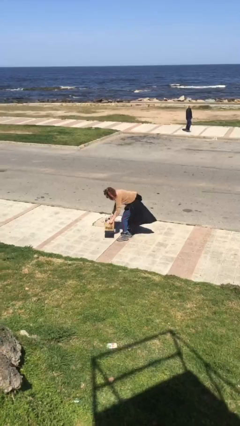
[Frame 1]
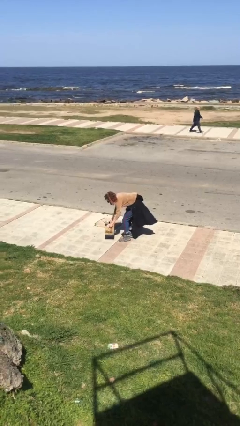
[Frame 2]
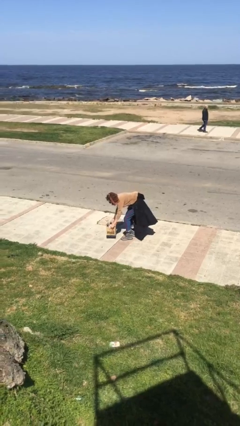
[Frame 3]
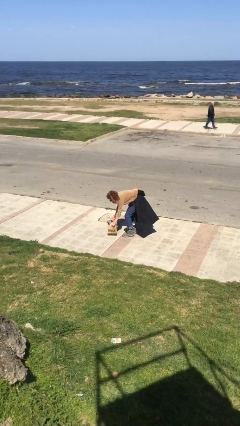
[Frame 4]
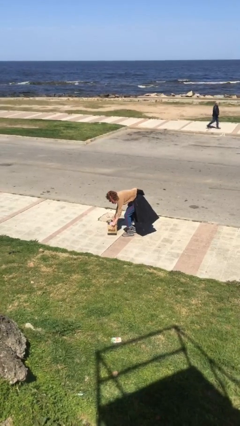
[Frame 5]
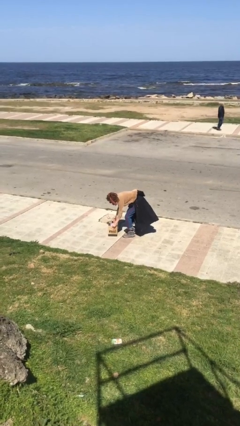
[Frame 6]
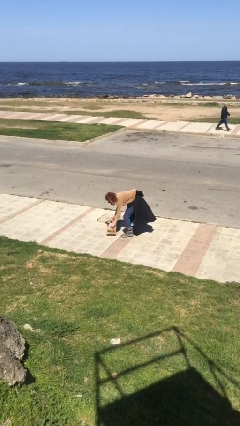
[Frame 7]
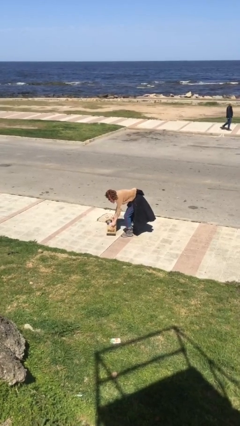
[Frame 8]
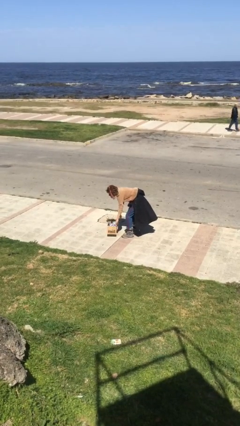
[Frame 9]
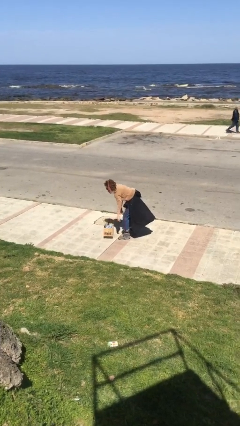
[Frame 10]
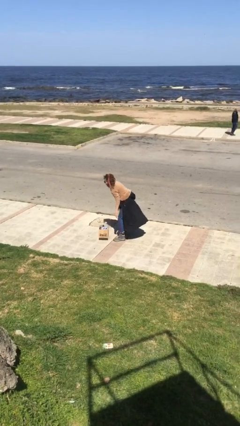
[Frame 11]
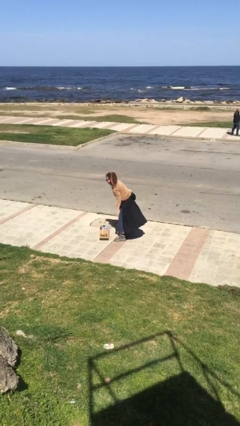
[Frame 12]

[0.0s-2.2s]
person puts down object on floor

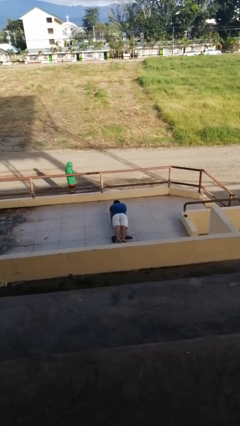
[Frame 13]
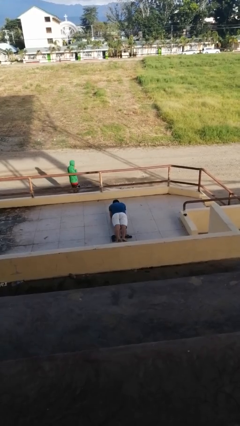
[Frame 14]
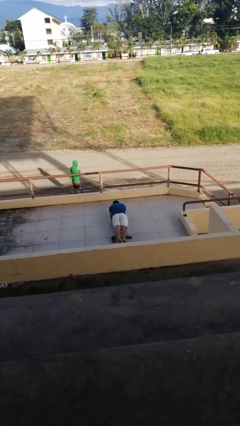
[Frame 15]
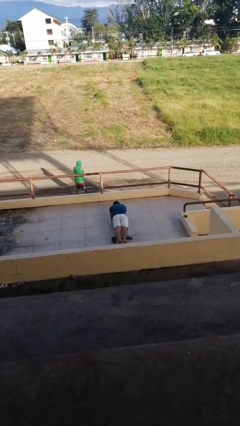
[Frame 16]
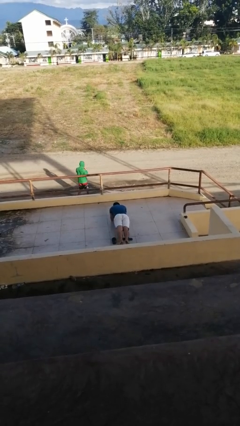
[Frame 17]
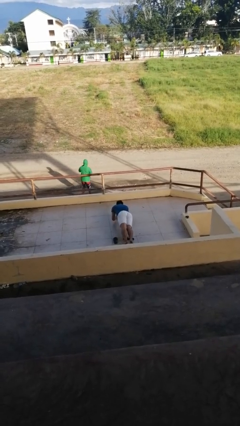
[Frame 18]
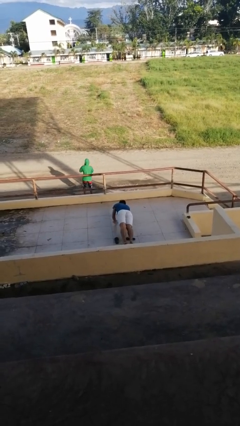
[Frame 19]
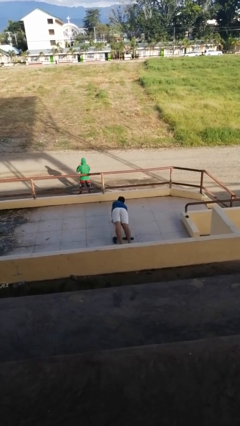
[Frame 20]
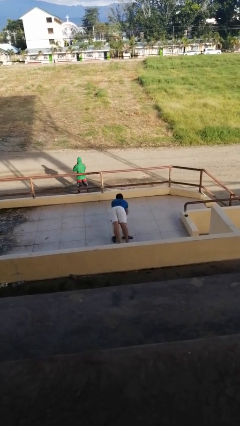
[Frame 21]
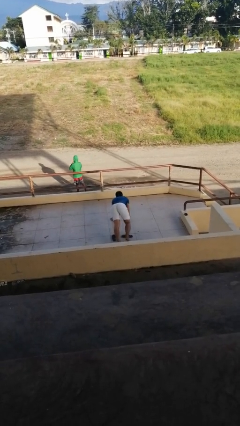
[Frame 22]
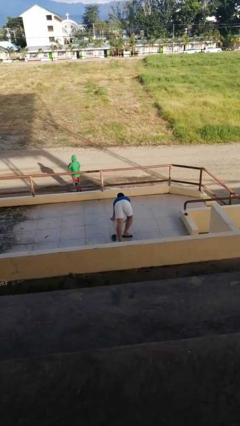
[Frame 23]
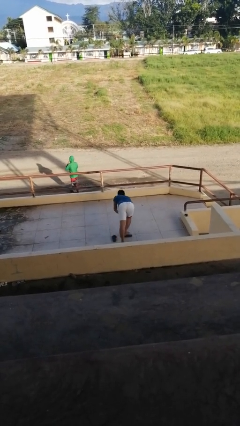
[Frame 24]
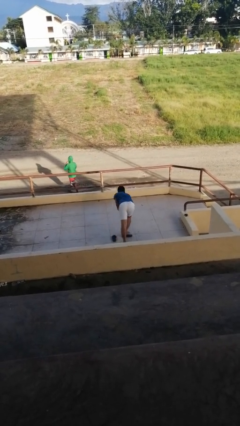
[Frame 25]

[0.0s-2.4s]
person stands up from floor

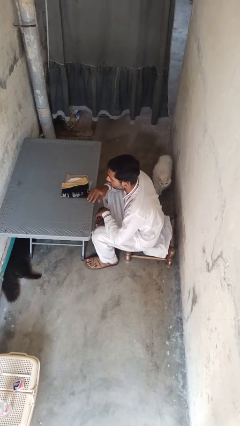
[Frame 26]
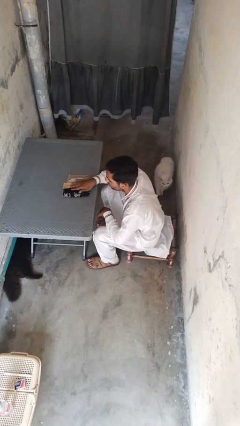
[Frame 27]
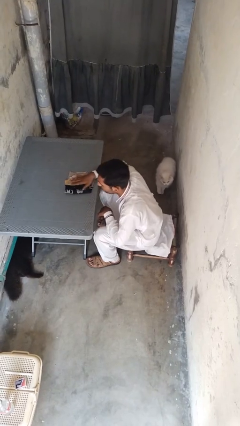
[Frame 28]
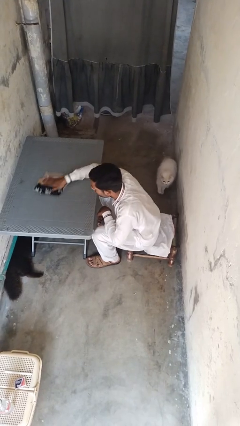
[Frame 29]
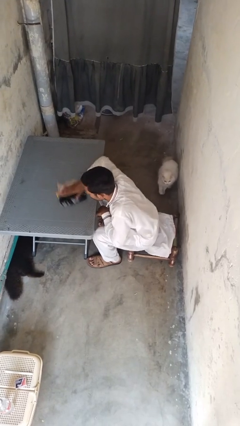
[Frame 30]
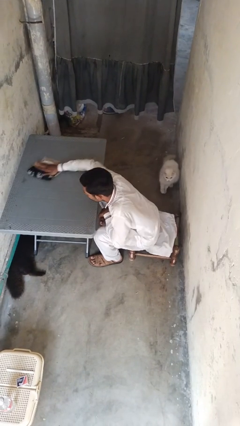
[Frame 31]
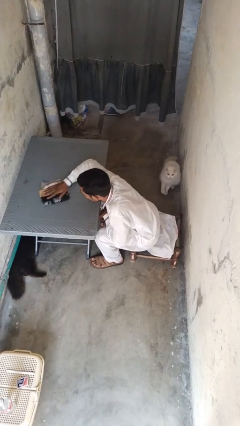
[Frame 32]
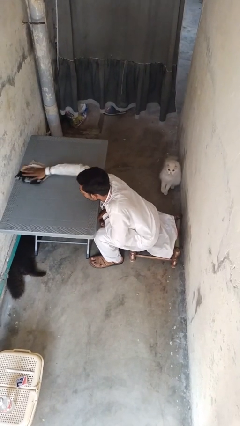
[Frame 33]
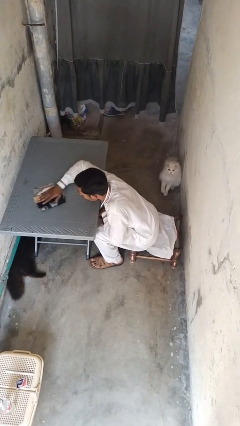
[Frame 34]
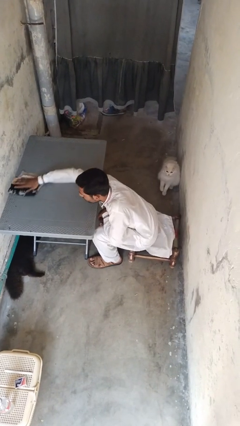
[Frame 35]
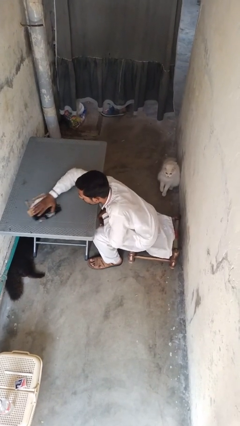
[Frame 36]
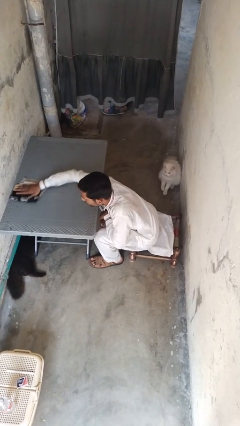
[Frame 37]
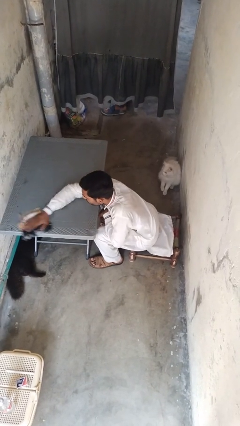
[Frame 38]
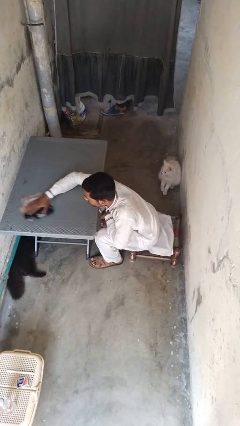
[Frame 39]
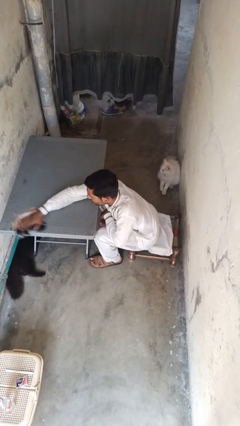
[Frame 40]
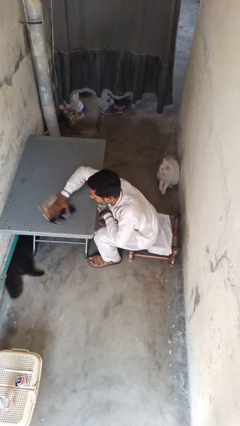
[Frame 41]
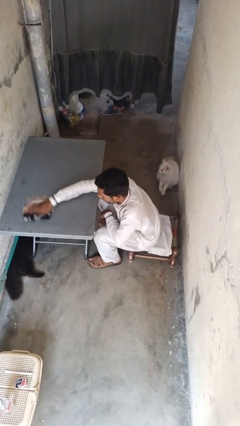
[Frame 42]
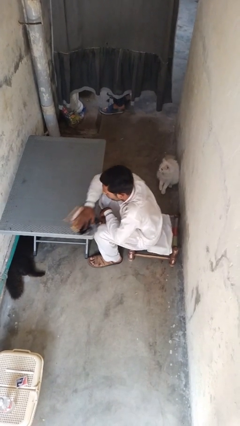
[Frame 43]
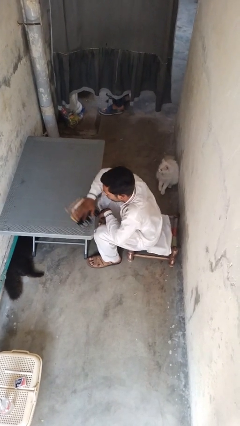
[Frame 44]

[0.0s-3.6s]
person cleans table with rag

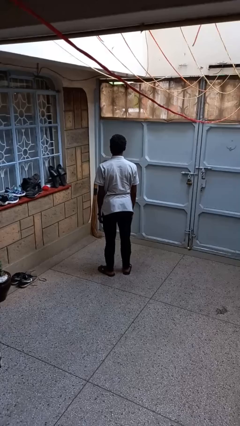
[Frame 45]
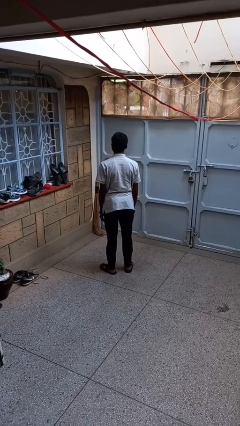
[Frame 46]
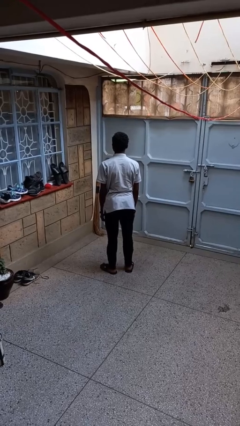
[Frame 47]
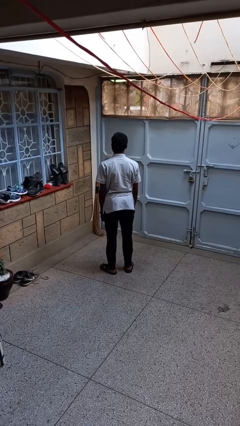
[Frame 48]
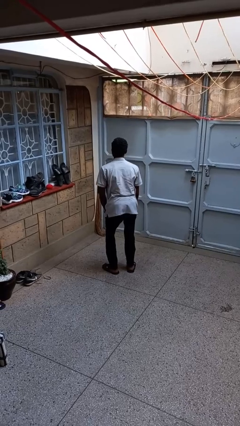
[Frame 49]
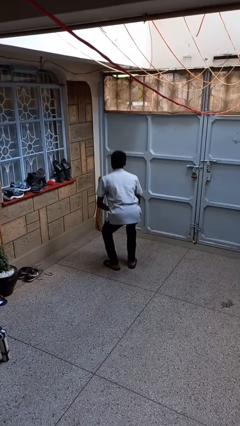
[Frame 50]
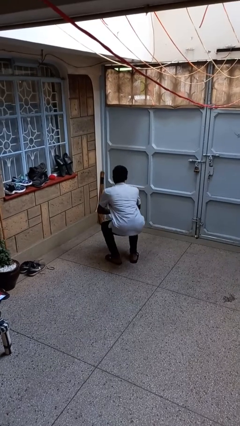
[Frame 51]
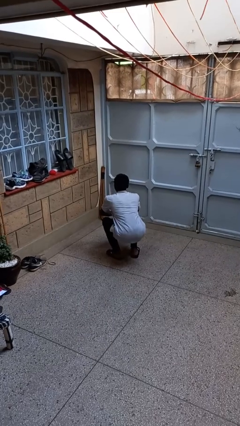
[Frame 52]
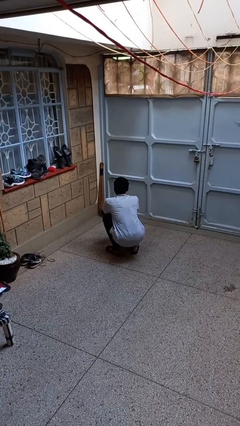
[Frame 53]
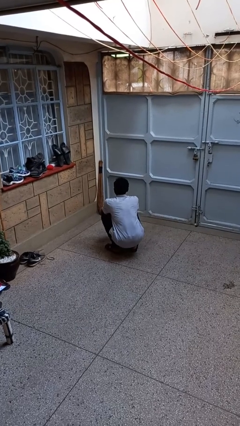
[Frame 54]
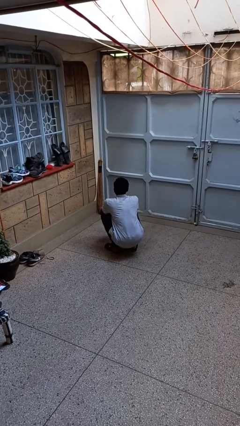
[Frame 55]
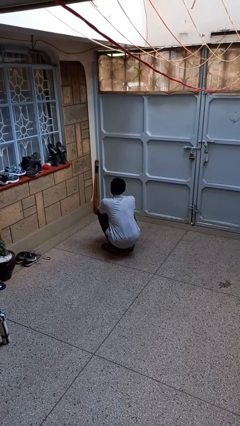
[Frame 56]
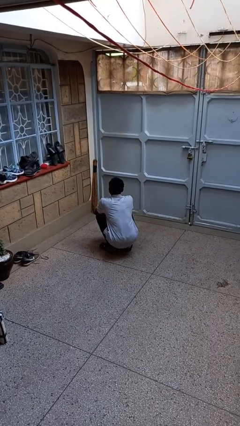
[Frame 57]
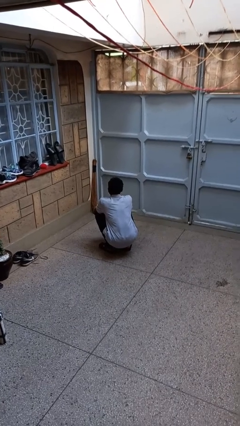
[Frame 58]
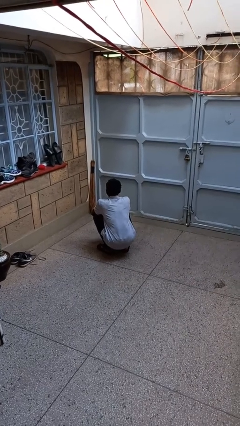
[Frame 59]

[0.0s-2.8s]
person squats

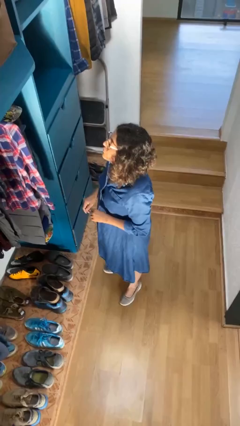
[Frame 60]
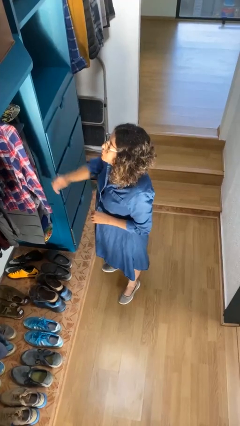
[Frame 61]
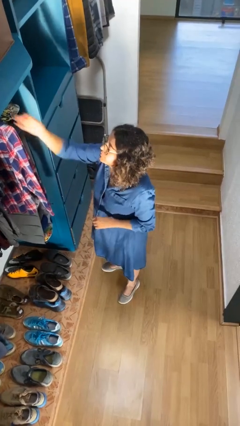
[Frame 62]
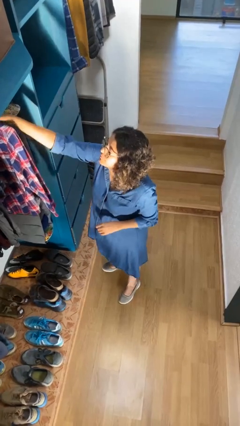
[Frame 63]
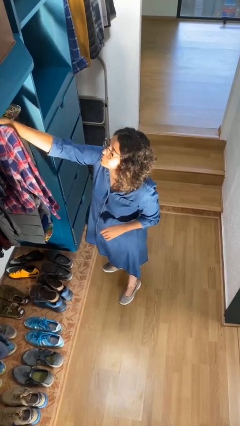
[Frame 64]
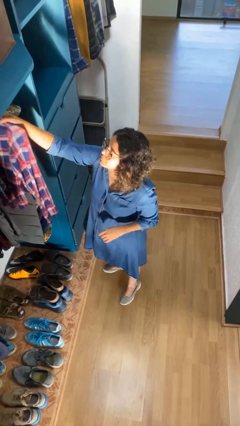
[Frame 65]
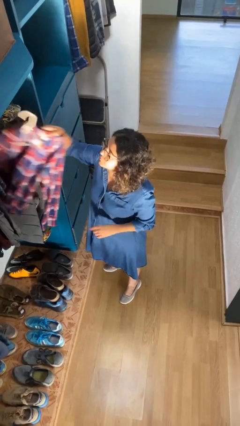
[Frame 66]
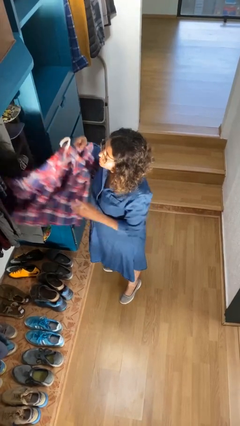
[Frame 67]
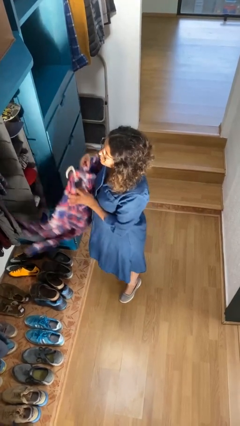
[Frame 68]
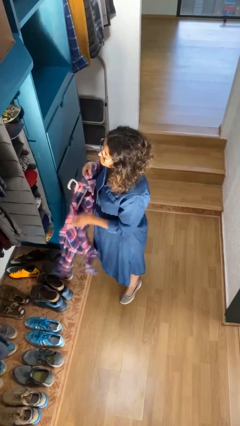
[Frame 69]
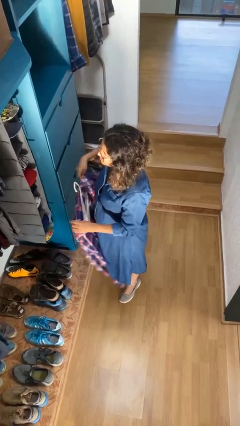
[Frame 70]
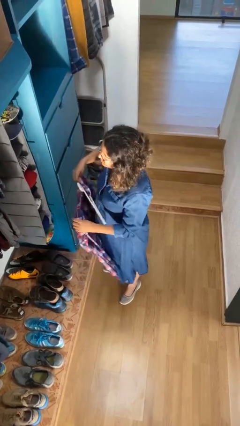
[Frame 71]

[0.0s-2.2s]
person takes clothes from closet

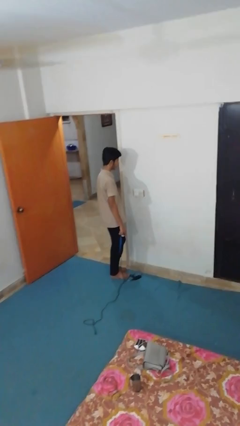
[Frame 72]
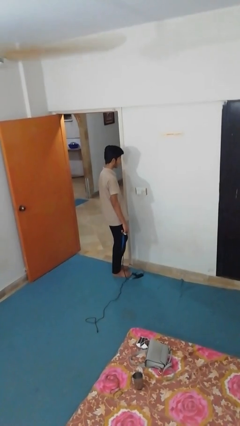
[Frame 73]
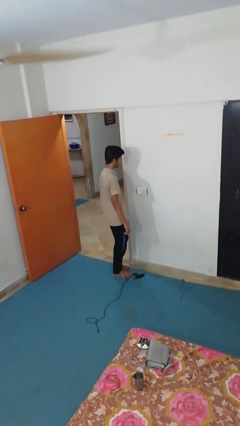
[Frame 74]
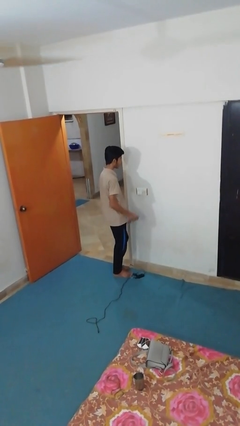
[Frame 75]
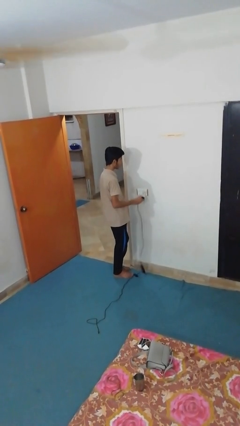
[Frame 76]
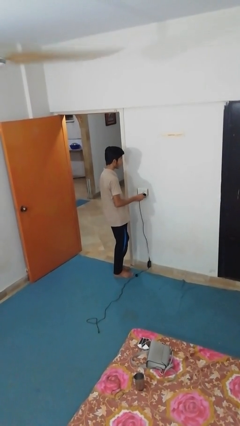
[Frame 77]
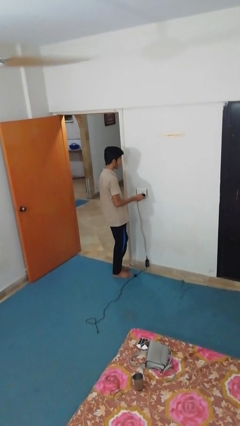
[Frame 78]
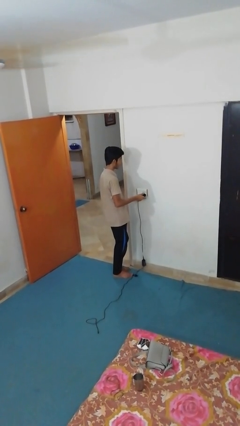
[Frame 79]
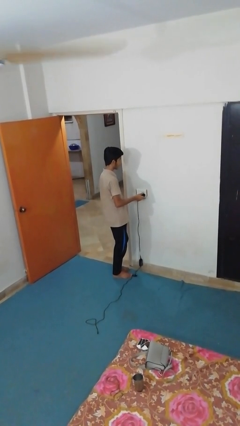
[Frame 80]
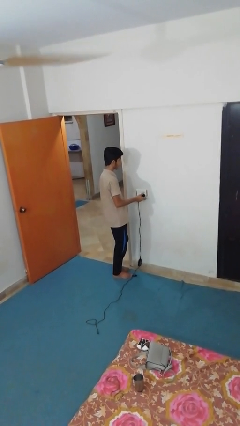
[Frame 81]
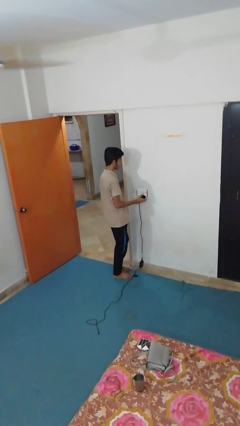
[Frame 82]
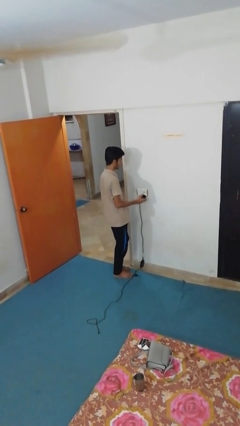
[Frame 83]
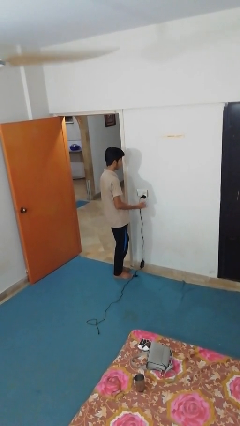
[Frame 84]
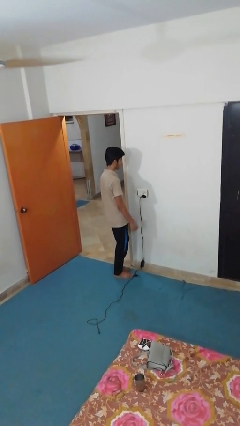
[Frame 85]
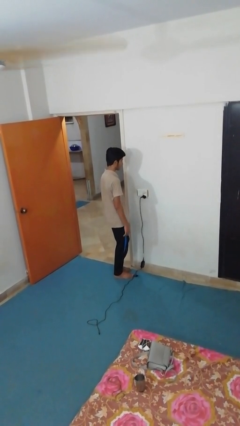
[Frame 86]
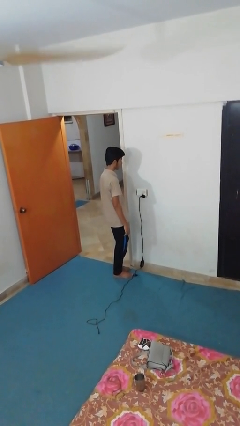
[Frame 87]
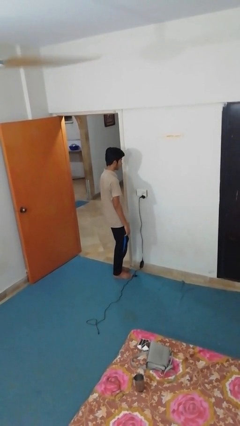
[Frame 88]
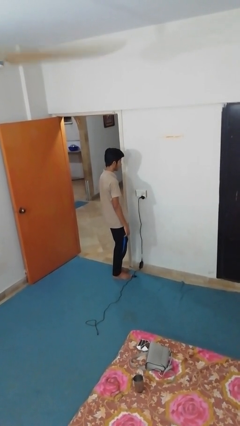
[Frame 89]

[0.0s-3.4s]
person plugs into electrical socket

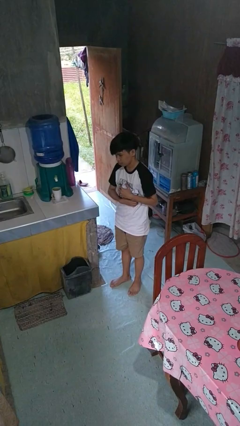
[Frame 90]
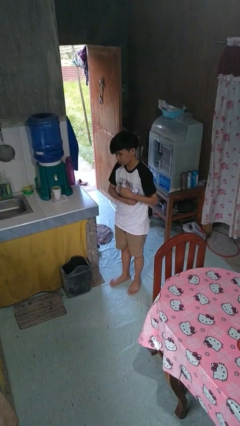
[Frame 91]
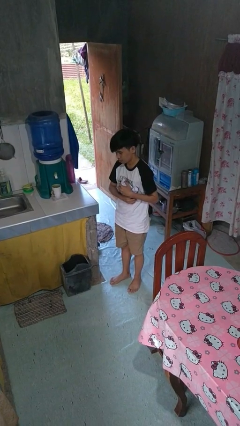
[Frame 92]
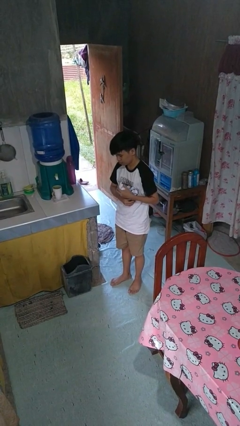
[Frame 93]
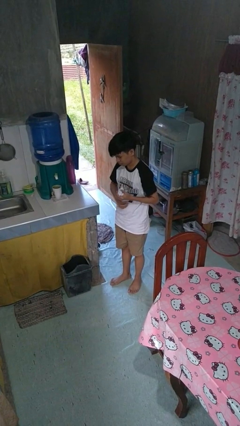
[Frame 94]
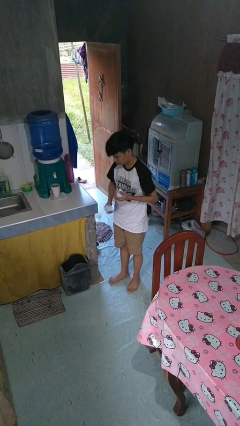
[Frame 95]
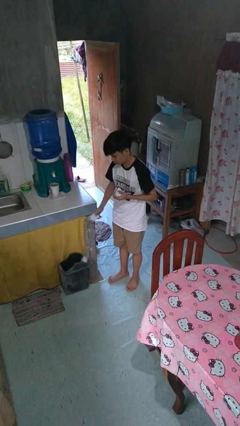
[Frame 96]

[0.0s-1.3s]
person discards trash
